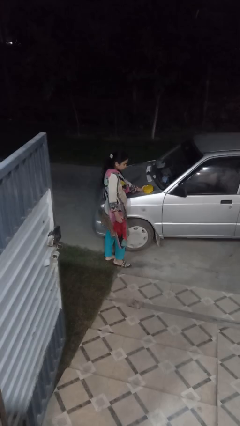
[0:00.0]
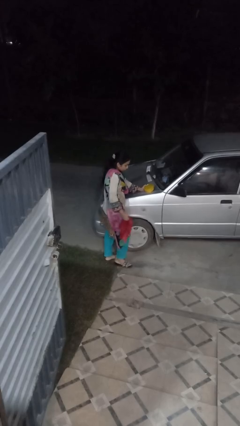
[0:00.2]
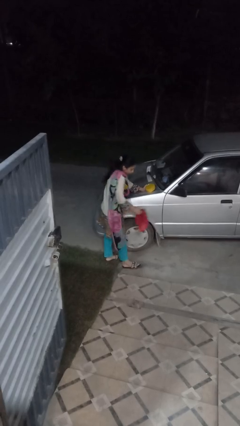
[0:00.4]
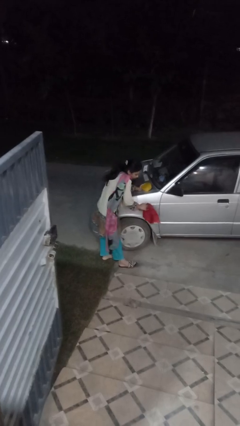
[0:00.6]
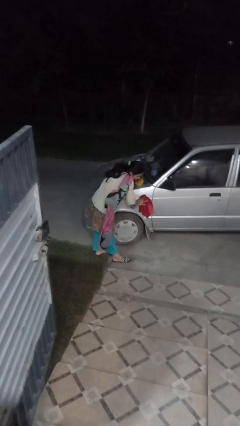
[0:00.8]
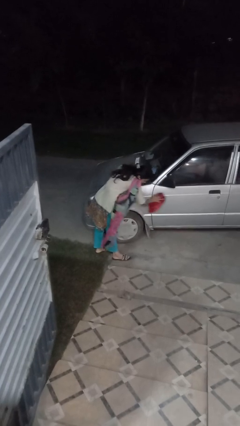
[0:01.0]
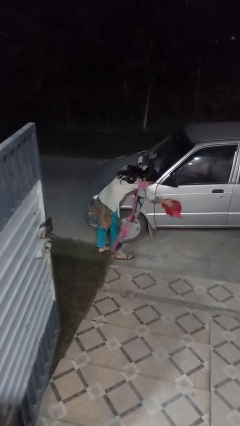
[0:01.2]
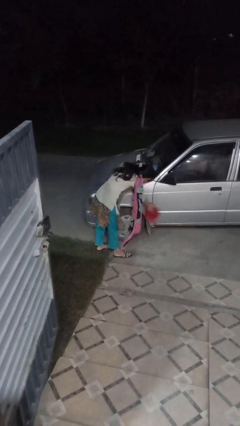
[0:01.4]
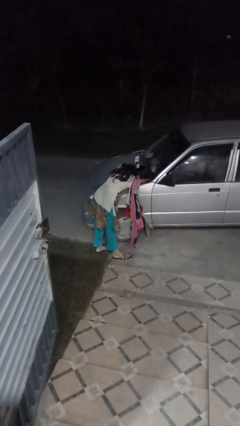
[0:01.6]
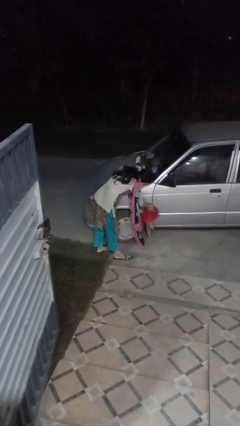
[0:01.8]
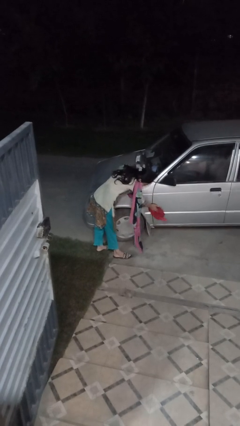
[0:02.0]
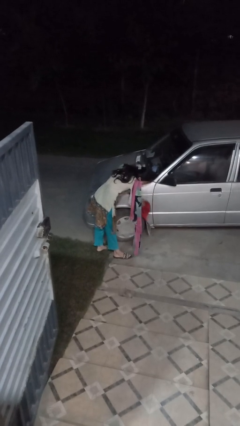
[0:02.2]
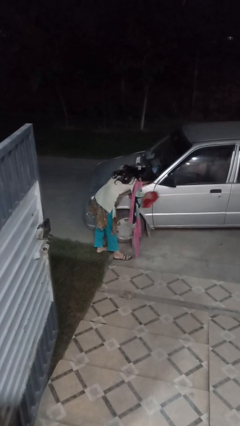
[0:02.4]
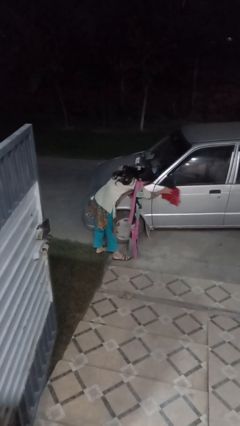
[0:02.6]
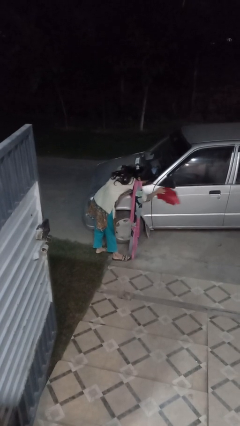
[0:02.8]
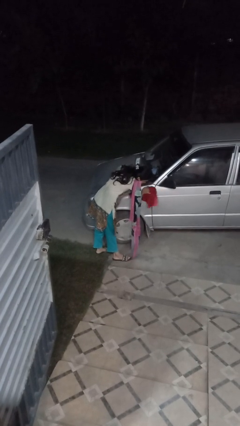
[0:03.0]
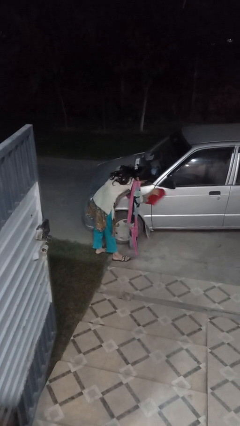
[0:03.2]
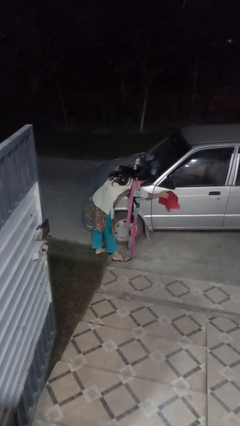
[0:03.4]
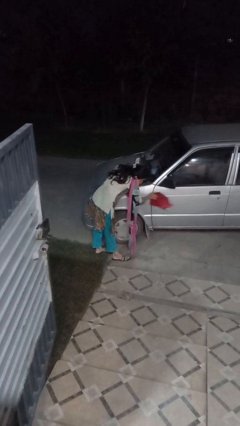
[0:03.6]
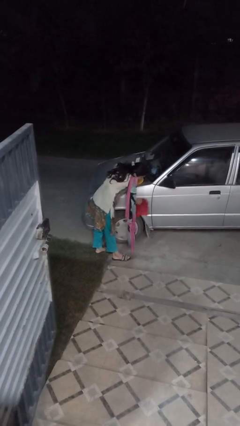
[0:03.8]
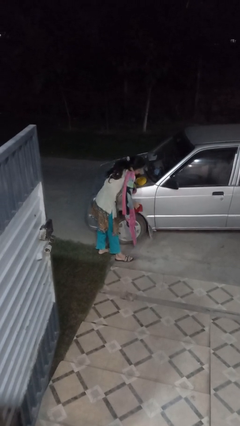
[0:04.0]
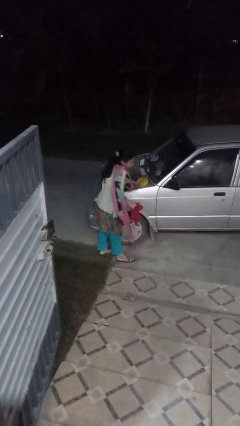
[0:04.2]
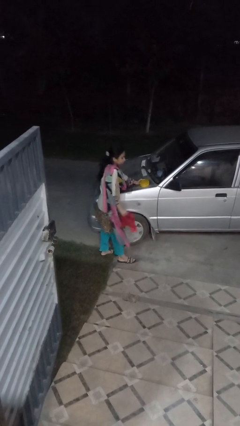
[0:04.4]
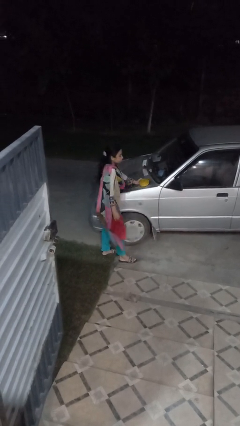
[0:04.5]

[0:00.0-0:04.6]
person polishes car with rag

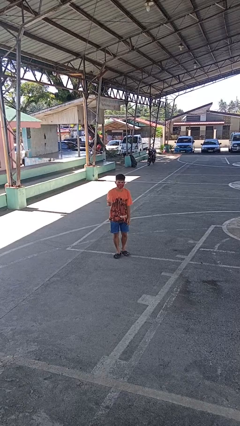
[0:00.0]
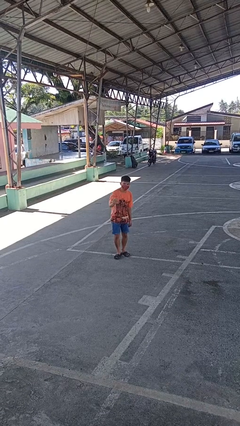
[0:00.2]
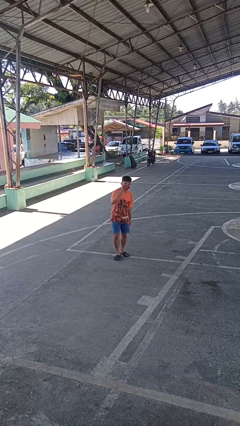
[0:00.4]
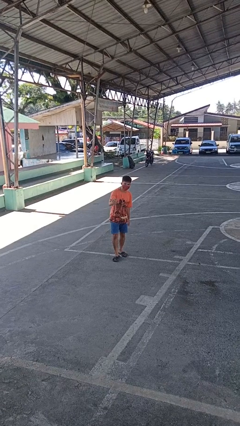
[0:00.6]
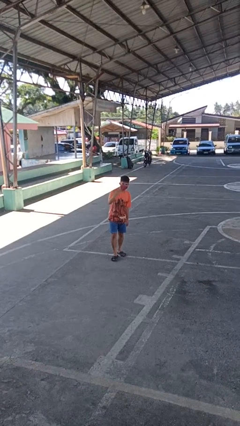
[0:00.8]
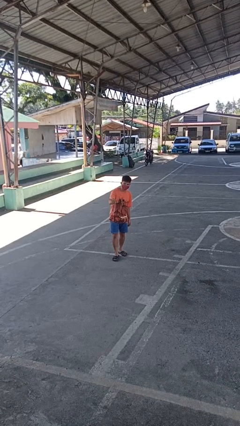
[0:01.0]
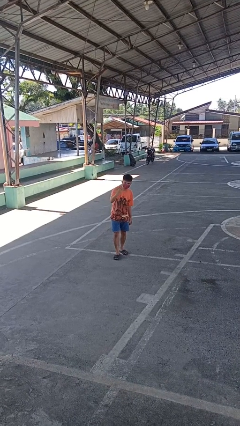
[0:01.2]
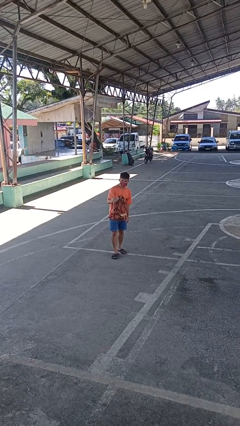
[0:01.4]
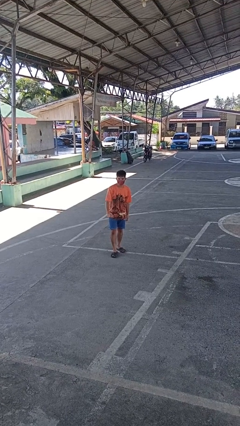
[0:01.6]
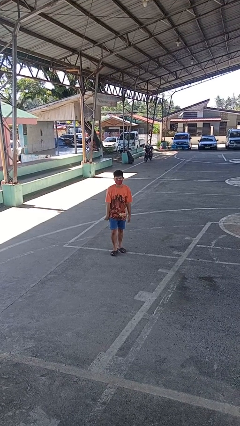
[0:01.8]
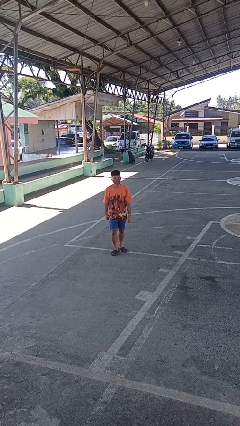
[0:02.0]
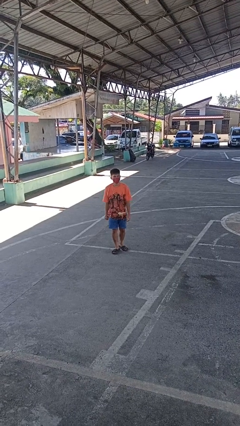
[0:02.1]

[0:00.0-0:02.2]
person gestures come here

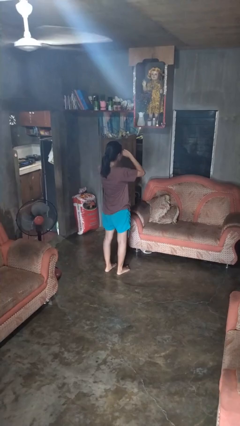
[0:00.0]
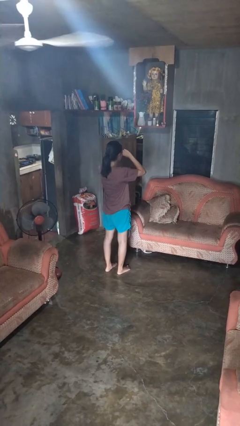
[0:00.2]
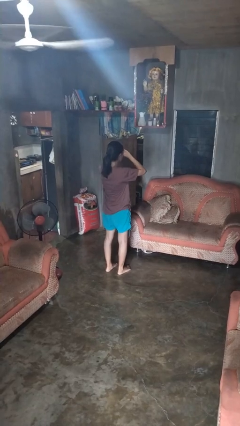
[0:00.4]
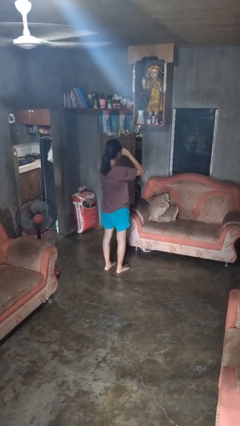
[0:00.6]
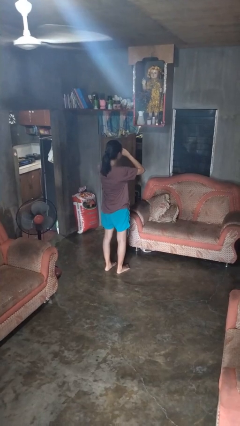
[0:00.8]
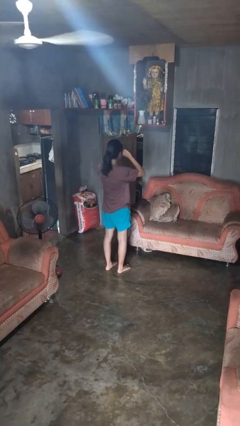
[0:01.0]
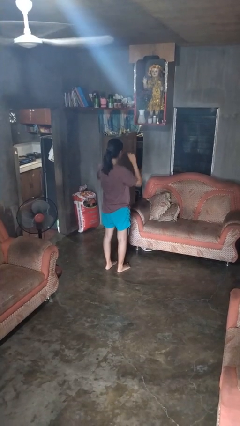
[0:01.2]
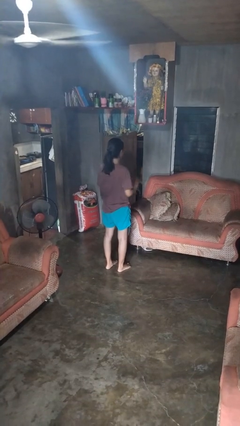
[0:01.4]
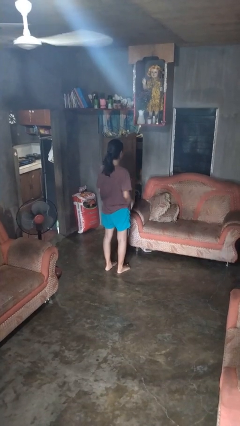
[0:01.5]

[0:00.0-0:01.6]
person rubs eyes

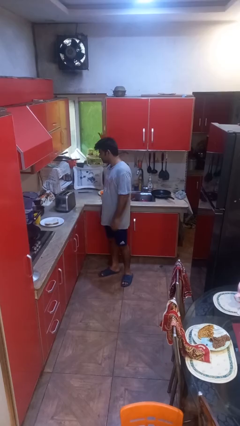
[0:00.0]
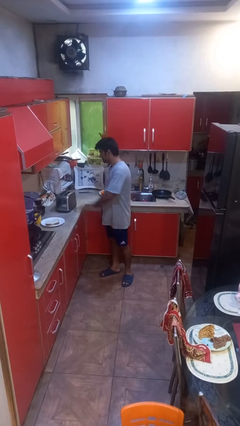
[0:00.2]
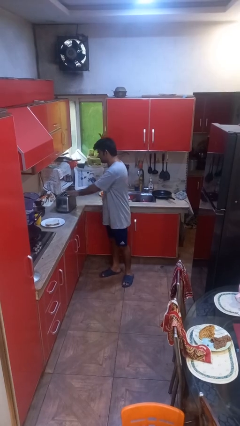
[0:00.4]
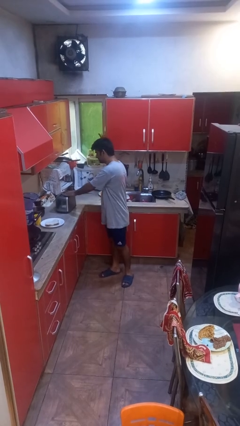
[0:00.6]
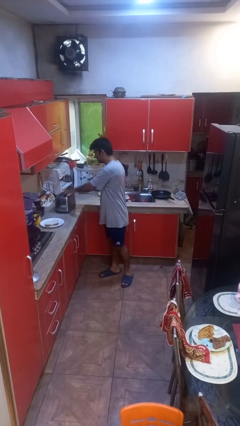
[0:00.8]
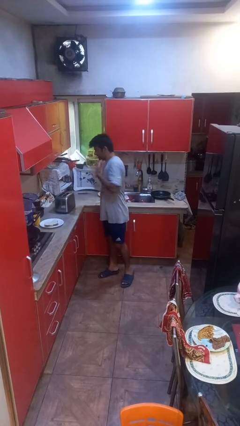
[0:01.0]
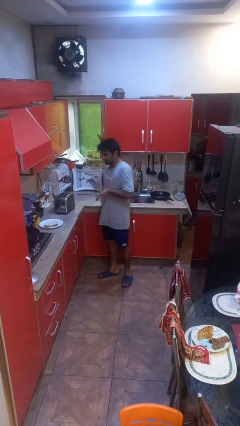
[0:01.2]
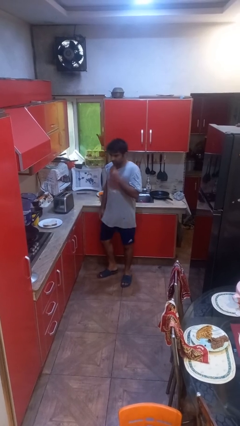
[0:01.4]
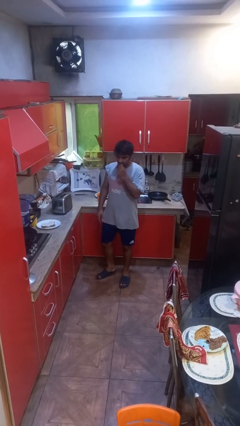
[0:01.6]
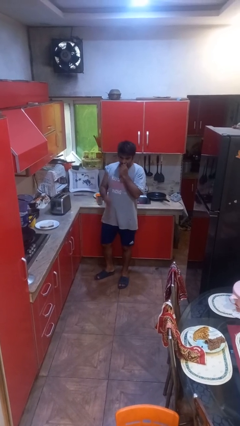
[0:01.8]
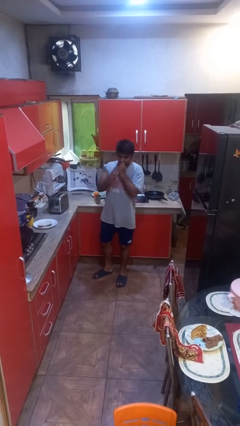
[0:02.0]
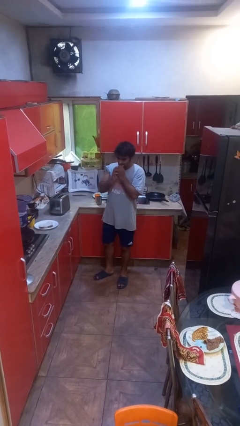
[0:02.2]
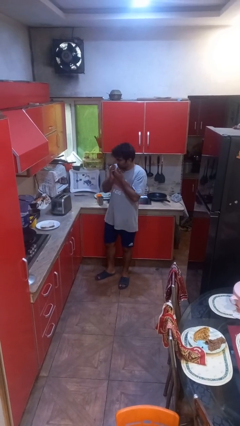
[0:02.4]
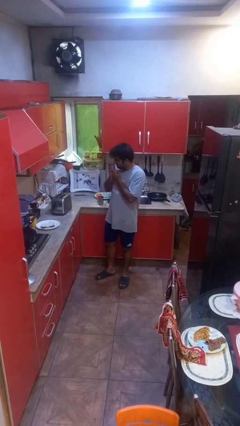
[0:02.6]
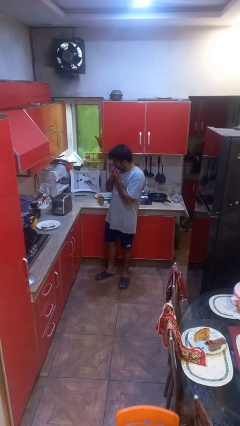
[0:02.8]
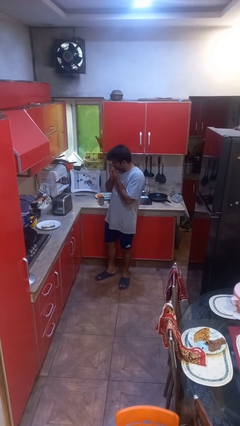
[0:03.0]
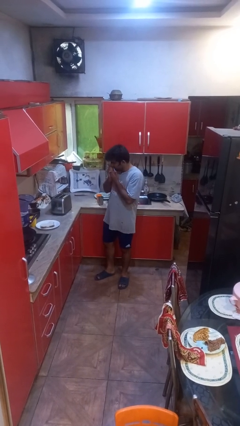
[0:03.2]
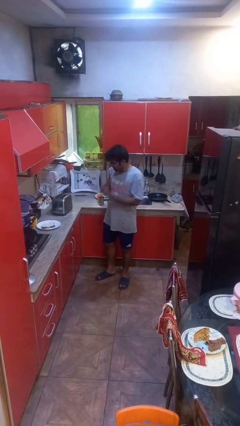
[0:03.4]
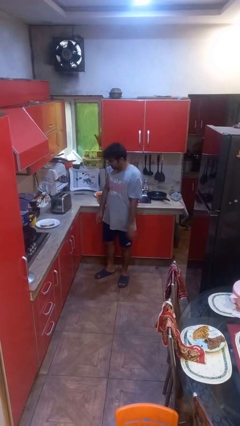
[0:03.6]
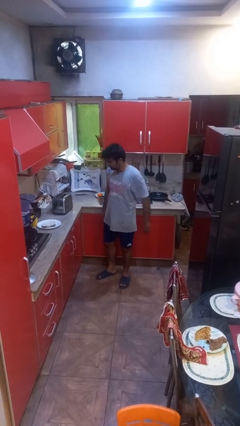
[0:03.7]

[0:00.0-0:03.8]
person burns hand

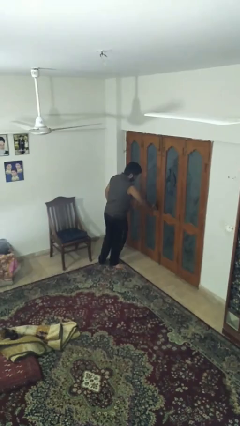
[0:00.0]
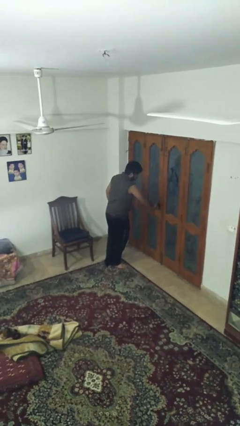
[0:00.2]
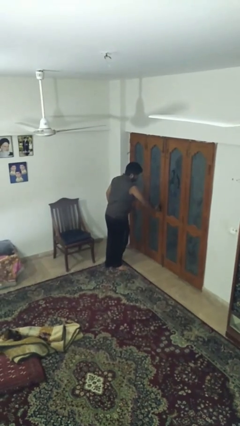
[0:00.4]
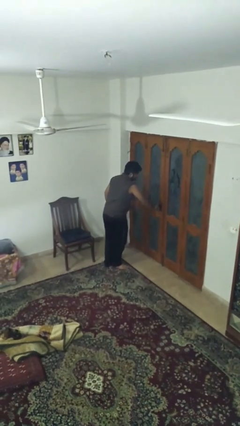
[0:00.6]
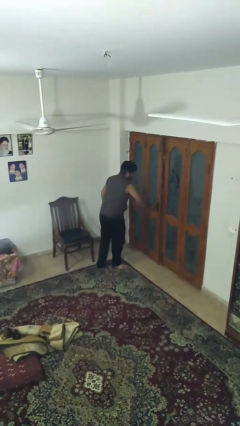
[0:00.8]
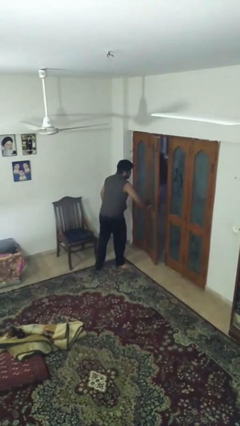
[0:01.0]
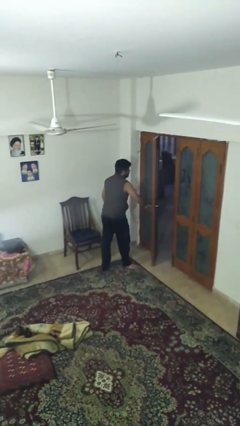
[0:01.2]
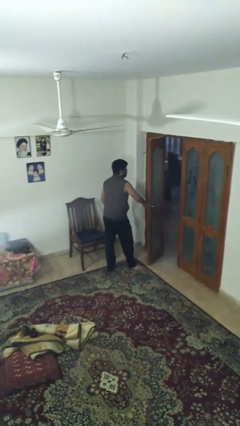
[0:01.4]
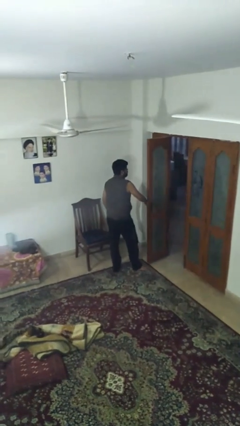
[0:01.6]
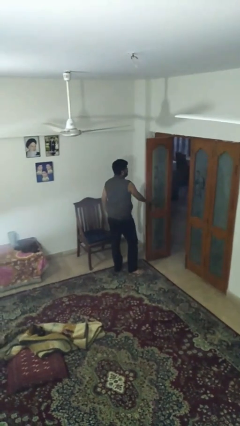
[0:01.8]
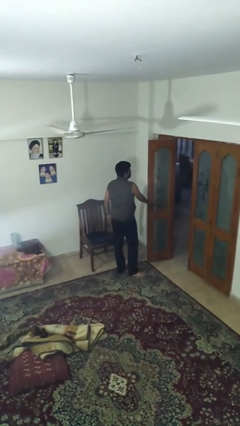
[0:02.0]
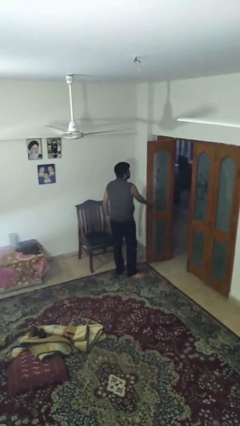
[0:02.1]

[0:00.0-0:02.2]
person opens facility door

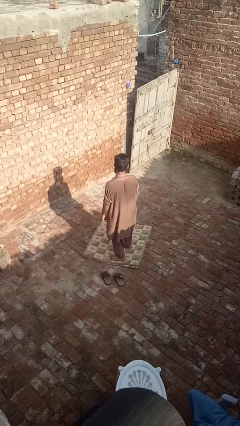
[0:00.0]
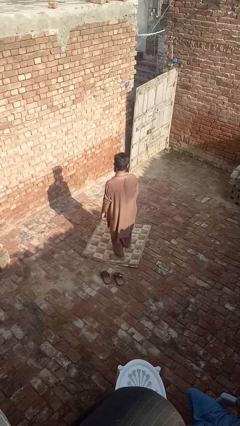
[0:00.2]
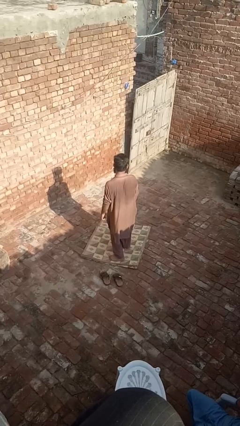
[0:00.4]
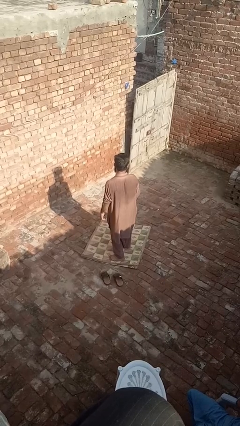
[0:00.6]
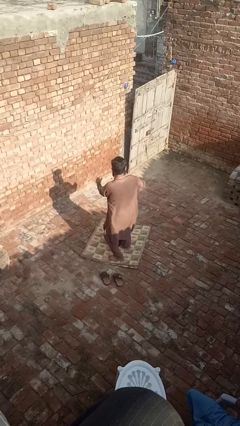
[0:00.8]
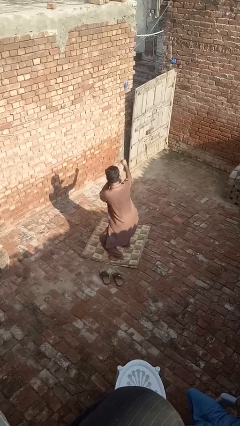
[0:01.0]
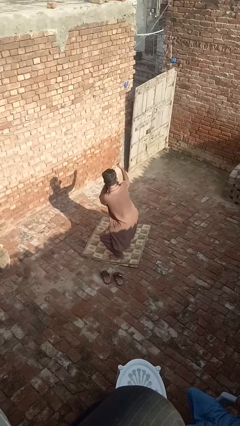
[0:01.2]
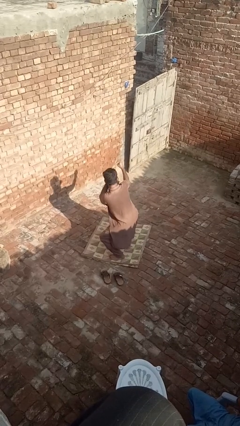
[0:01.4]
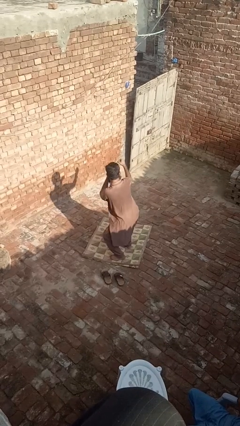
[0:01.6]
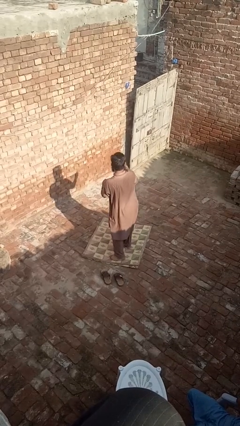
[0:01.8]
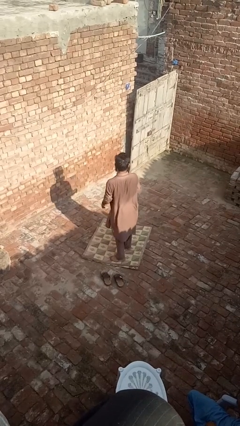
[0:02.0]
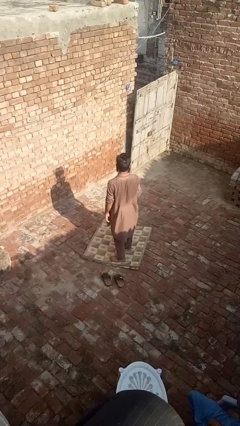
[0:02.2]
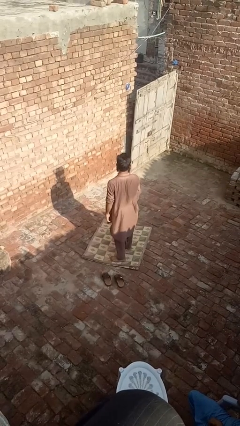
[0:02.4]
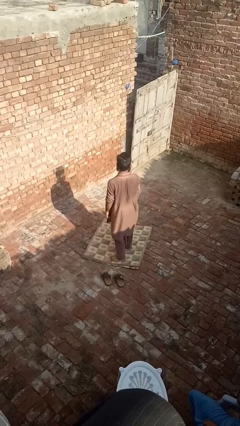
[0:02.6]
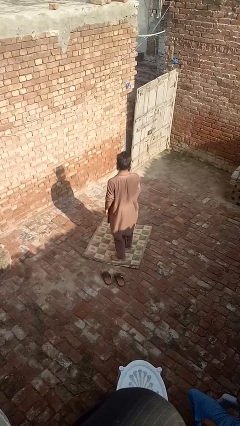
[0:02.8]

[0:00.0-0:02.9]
person karate chop
